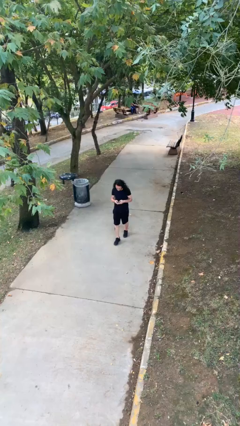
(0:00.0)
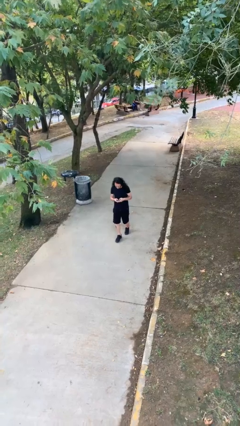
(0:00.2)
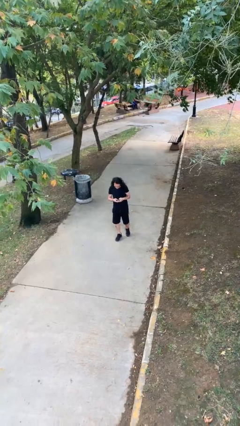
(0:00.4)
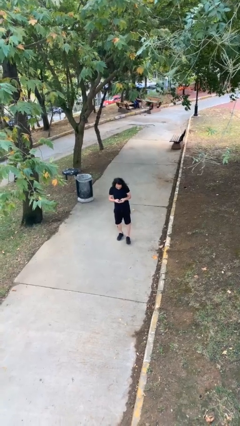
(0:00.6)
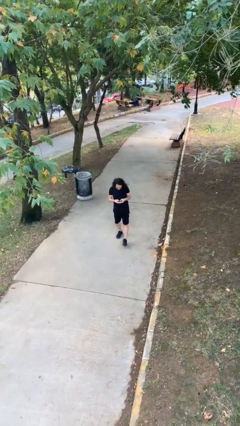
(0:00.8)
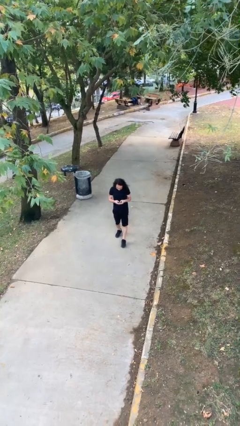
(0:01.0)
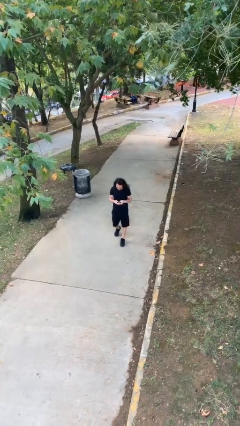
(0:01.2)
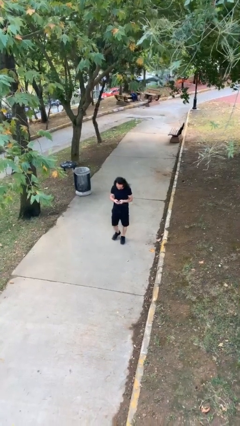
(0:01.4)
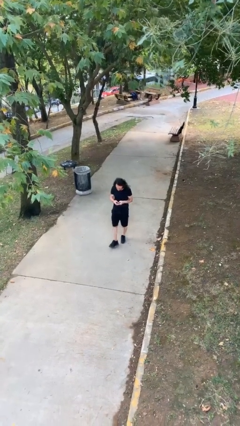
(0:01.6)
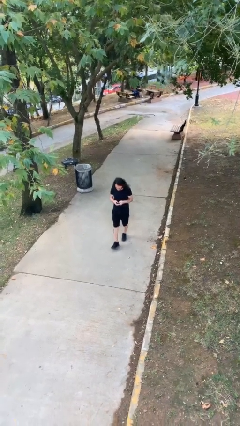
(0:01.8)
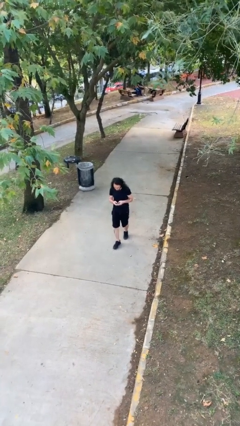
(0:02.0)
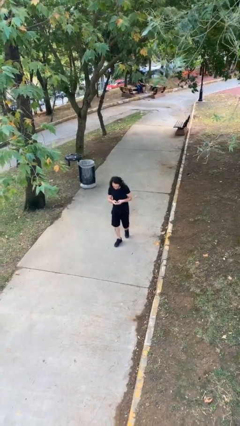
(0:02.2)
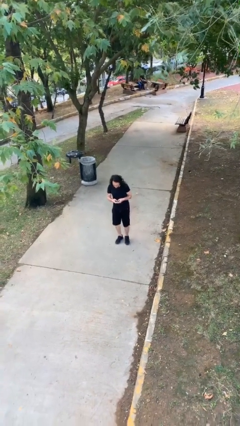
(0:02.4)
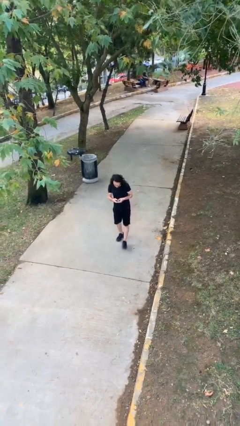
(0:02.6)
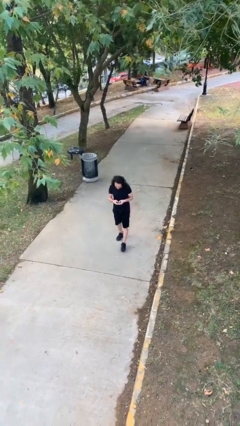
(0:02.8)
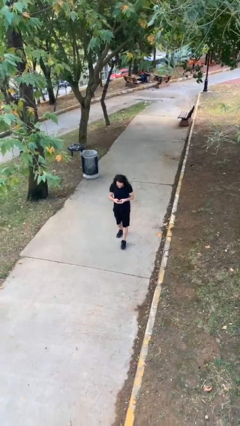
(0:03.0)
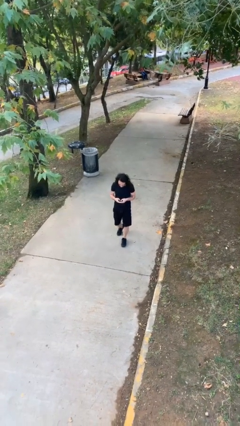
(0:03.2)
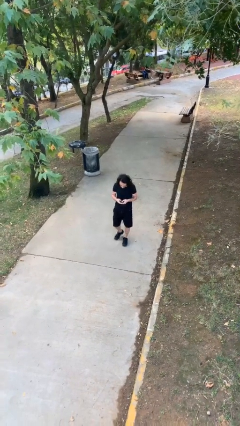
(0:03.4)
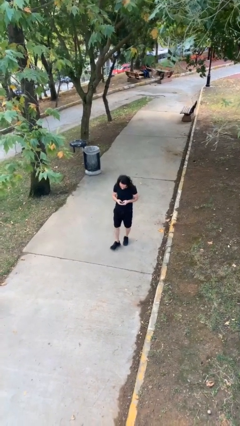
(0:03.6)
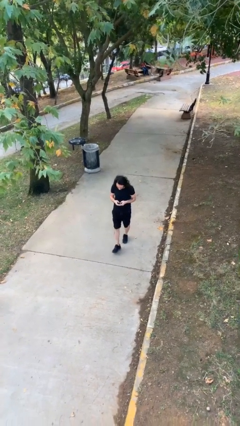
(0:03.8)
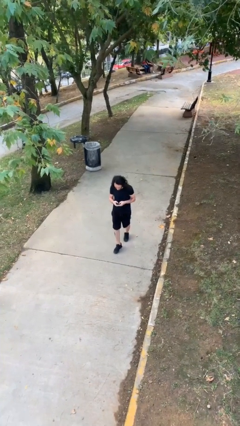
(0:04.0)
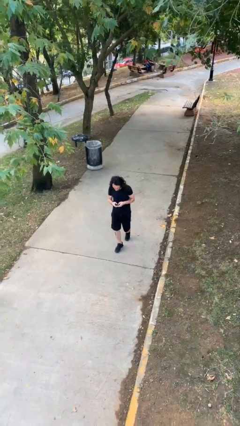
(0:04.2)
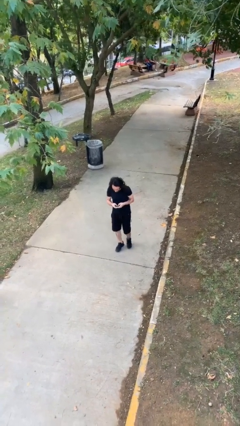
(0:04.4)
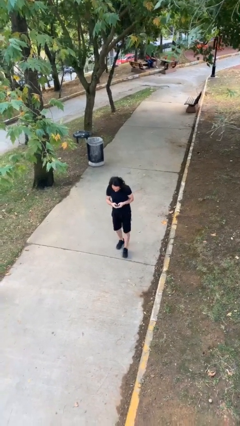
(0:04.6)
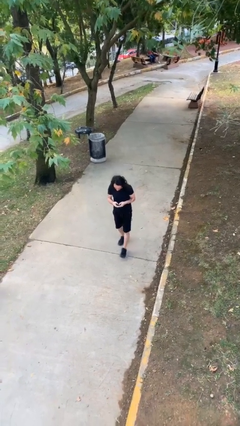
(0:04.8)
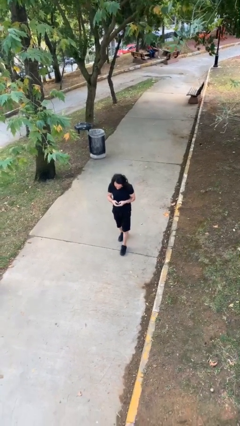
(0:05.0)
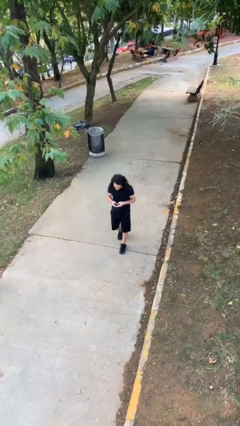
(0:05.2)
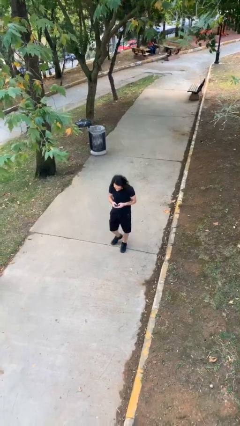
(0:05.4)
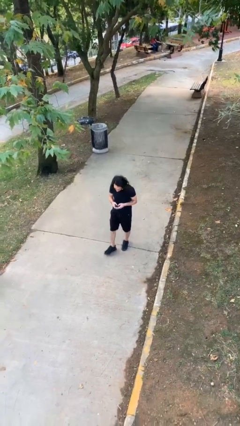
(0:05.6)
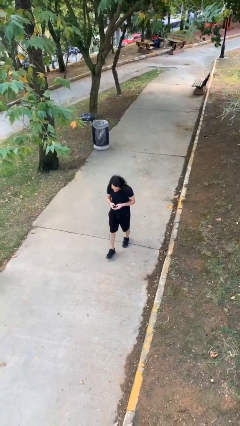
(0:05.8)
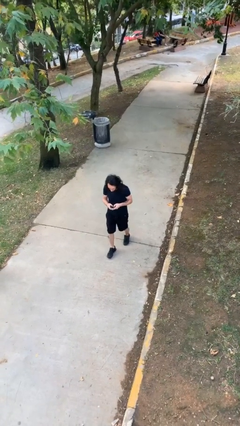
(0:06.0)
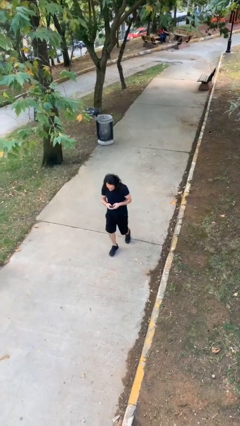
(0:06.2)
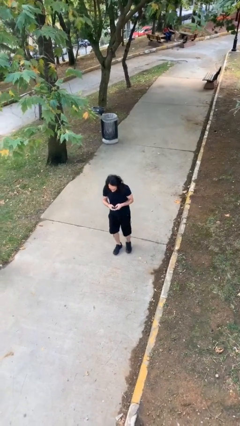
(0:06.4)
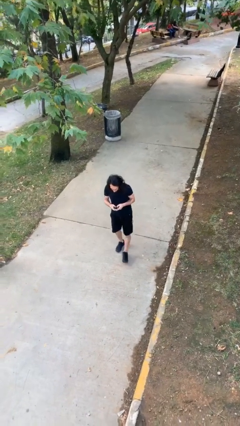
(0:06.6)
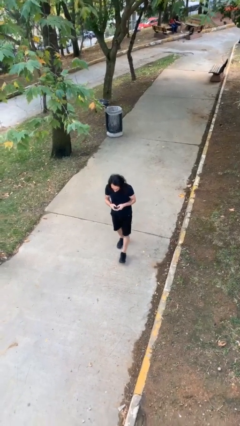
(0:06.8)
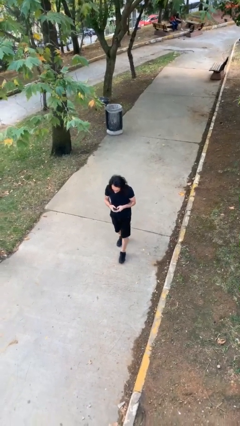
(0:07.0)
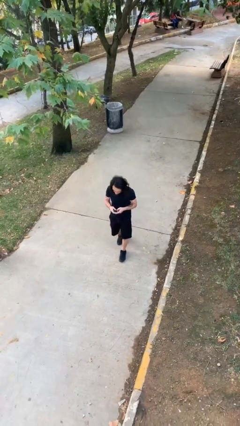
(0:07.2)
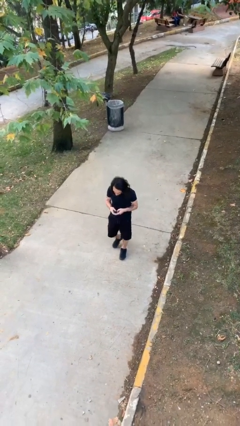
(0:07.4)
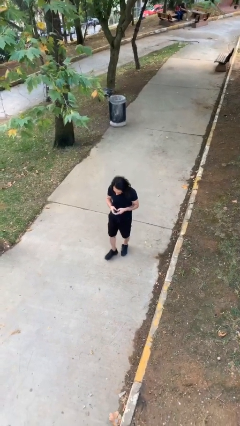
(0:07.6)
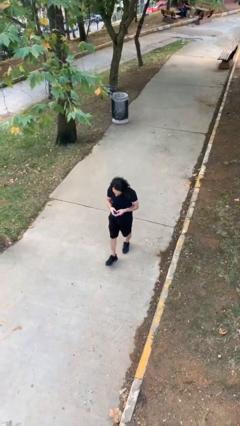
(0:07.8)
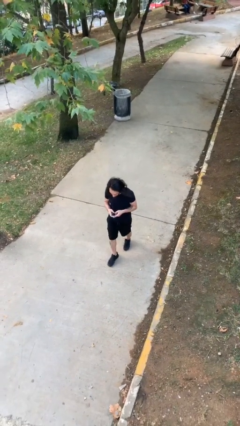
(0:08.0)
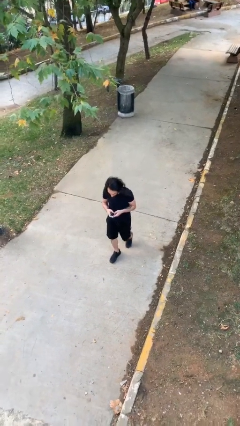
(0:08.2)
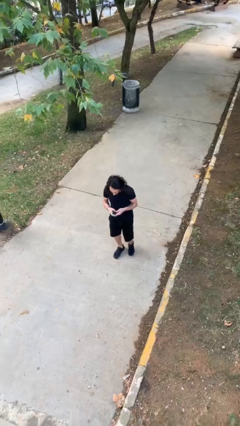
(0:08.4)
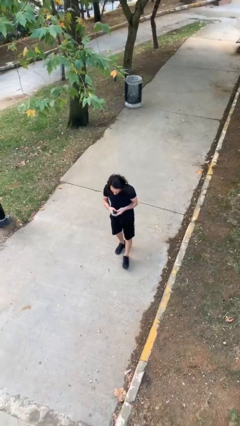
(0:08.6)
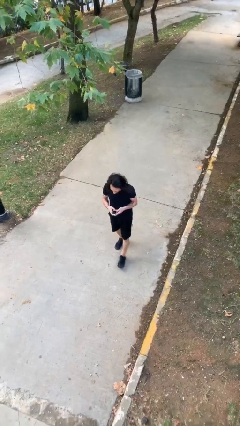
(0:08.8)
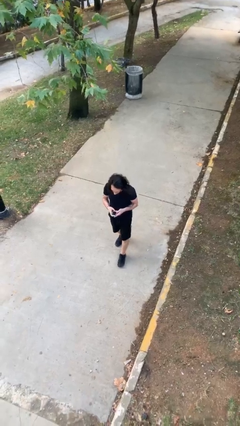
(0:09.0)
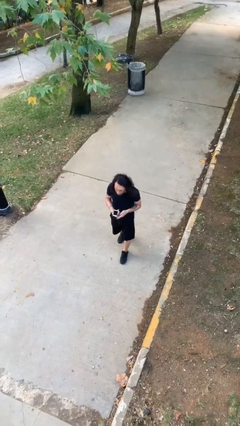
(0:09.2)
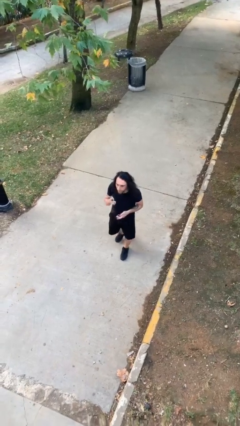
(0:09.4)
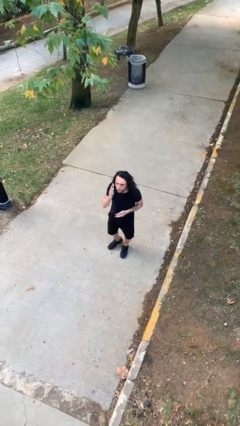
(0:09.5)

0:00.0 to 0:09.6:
person texts on phone

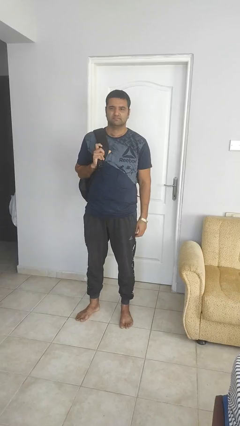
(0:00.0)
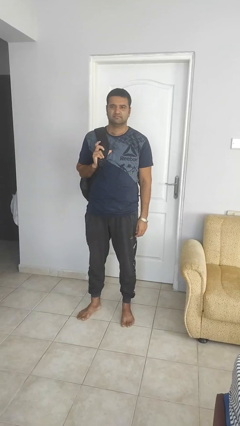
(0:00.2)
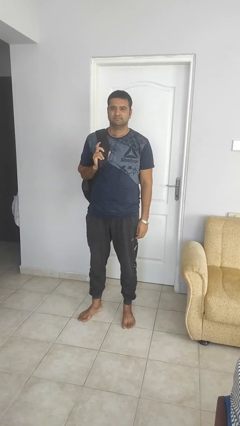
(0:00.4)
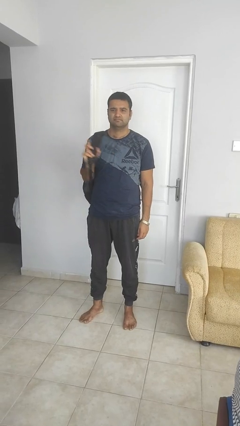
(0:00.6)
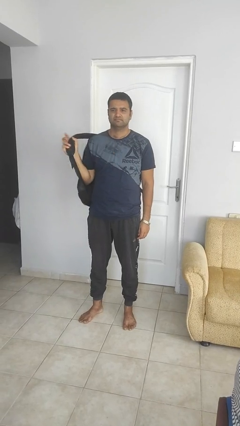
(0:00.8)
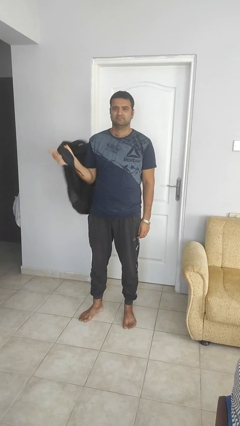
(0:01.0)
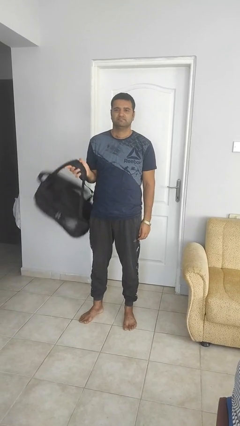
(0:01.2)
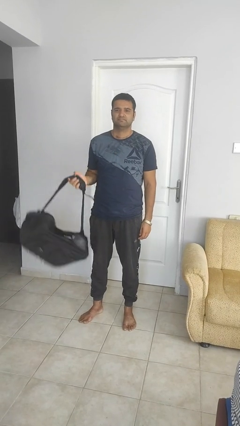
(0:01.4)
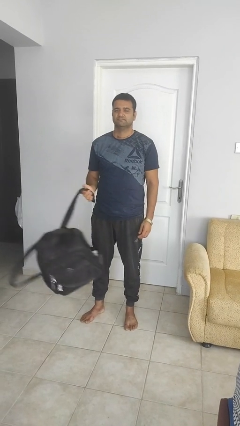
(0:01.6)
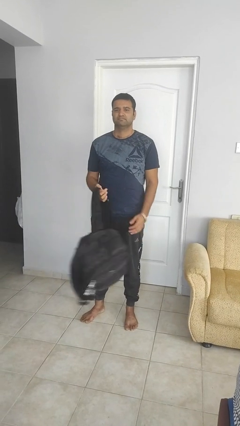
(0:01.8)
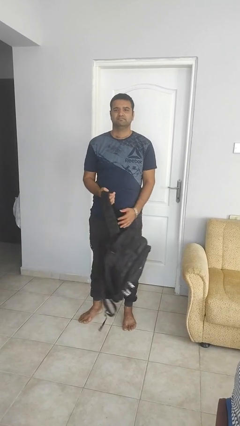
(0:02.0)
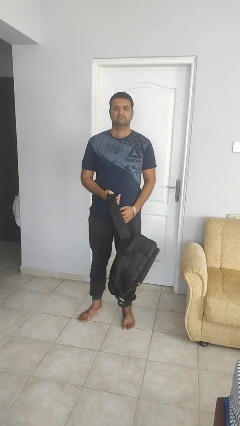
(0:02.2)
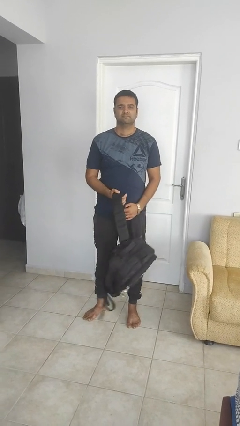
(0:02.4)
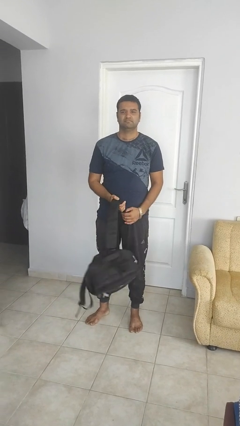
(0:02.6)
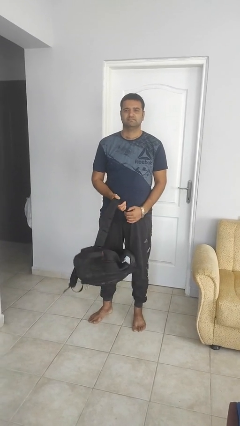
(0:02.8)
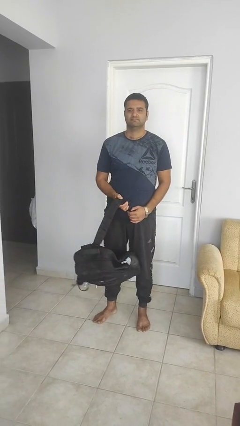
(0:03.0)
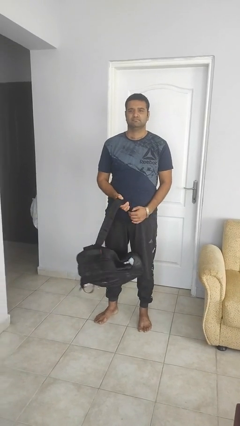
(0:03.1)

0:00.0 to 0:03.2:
person takes off backpack

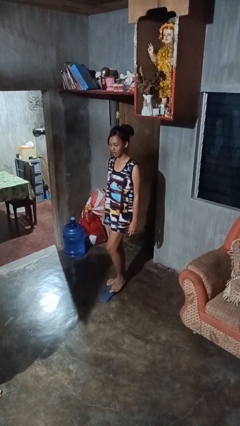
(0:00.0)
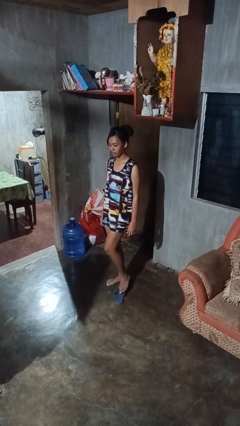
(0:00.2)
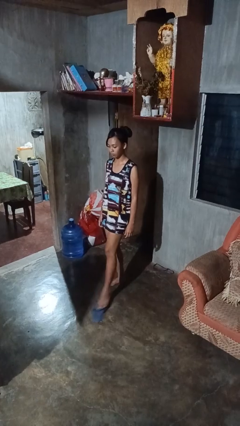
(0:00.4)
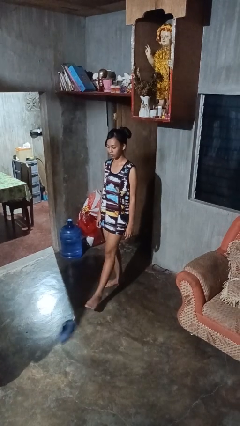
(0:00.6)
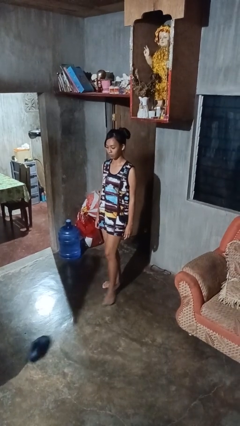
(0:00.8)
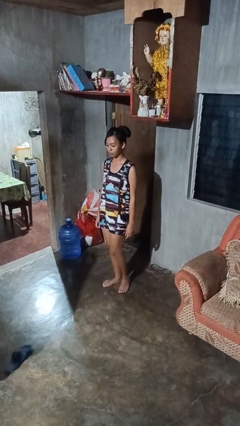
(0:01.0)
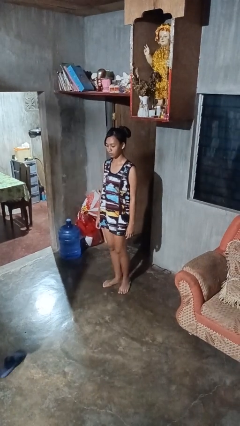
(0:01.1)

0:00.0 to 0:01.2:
person kicks object to person

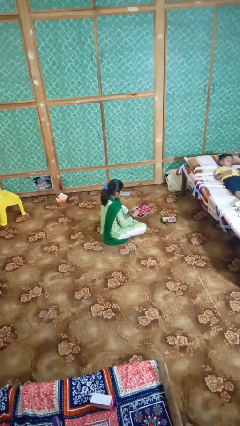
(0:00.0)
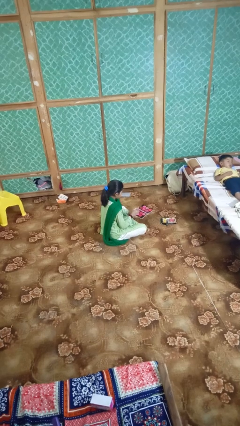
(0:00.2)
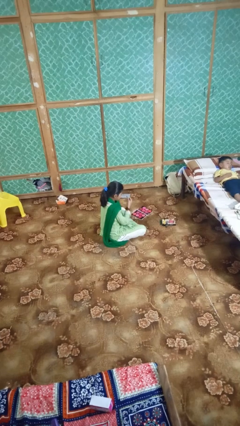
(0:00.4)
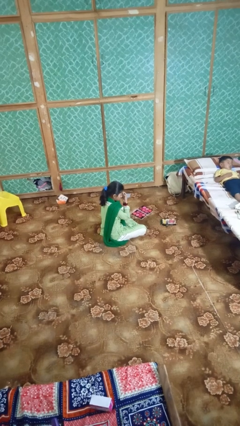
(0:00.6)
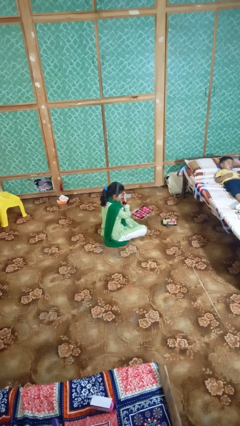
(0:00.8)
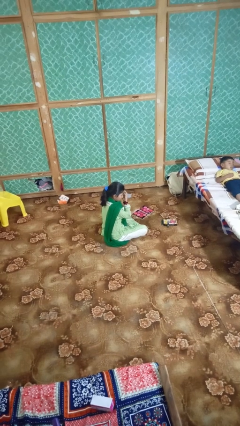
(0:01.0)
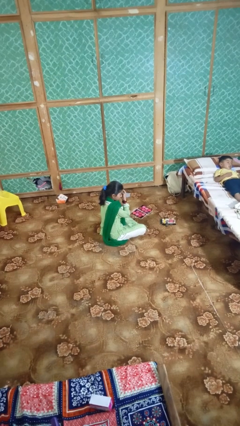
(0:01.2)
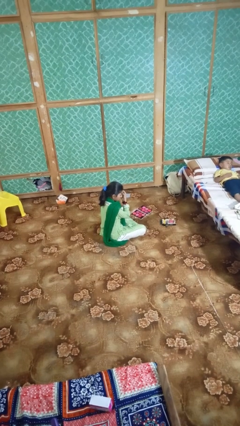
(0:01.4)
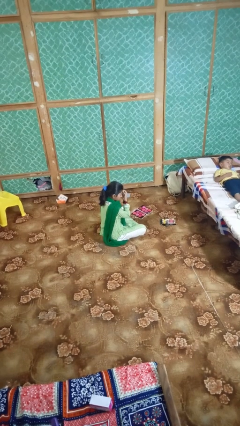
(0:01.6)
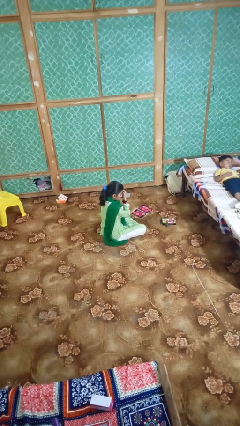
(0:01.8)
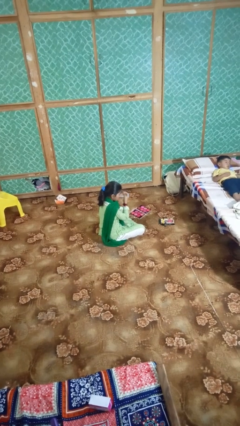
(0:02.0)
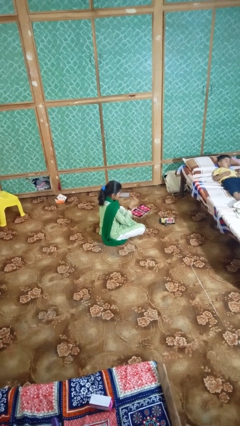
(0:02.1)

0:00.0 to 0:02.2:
person applies eye makeup

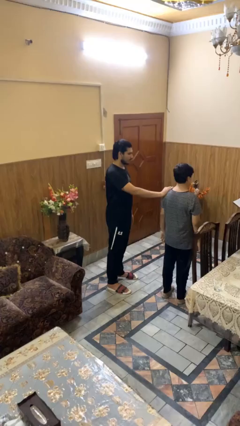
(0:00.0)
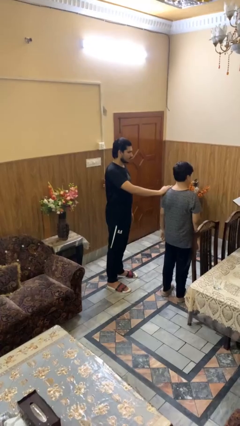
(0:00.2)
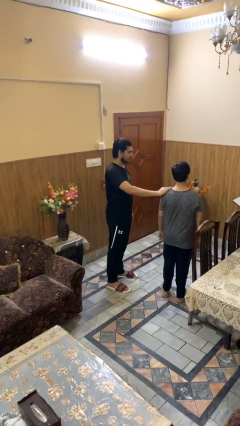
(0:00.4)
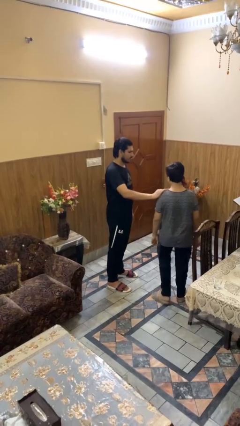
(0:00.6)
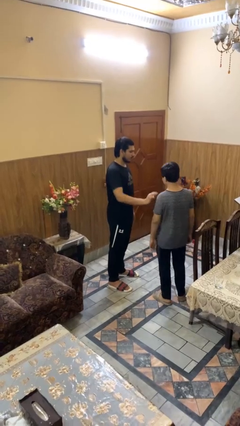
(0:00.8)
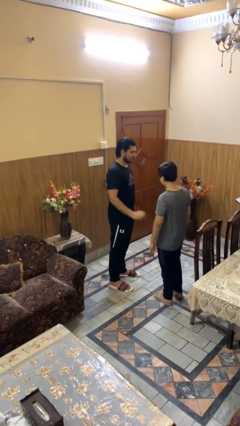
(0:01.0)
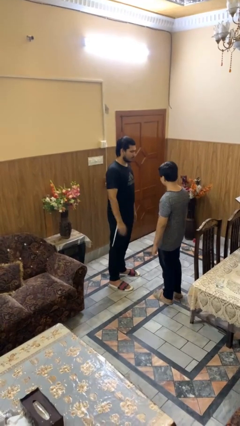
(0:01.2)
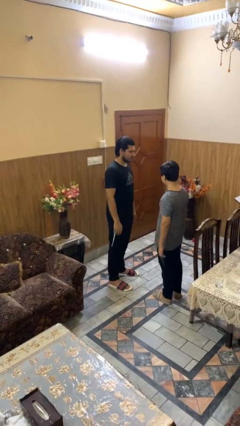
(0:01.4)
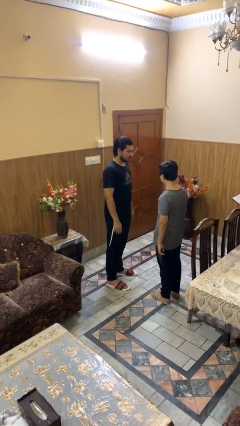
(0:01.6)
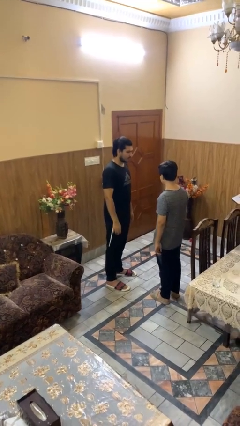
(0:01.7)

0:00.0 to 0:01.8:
person spins person around
